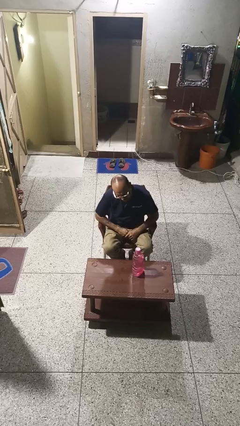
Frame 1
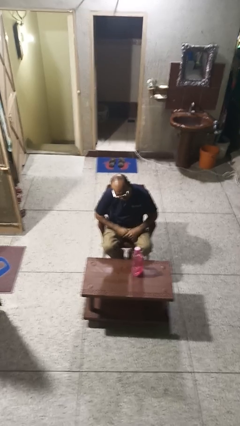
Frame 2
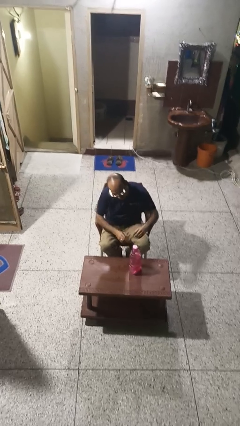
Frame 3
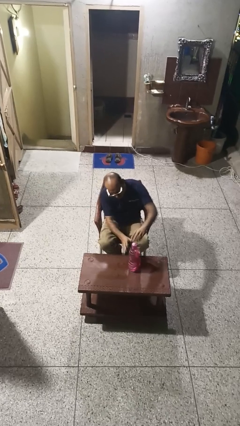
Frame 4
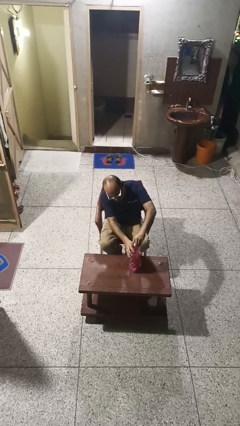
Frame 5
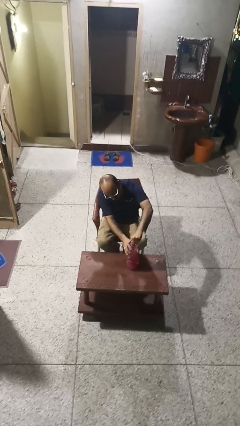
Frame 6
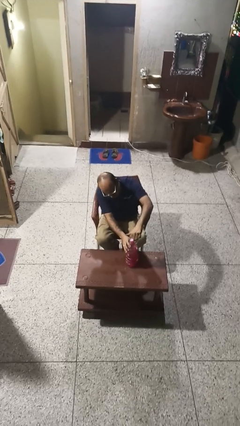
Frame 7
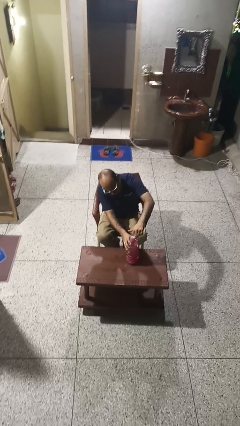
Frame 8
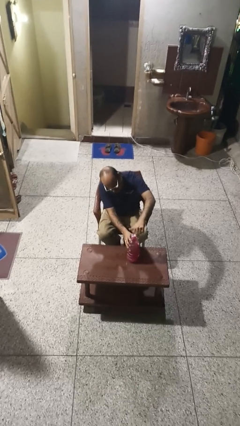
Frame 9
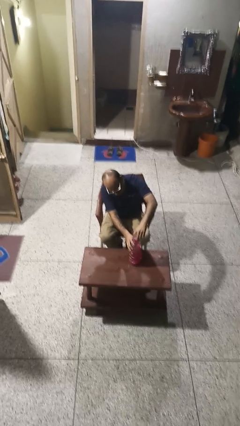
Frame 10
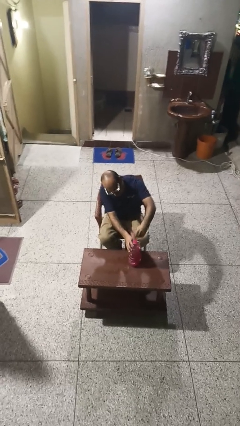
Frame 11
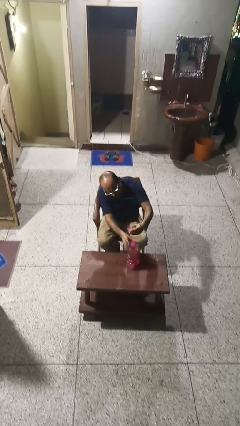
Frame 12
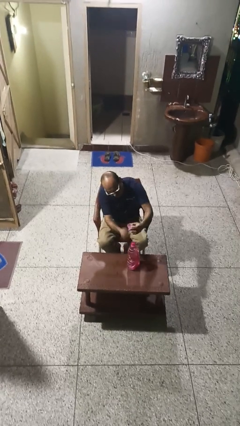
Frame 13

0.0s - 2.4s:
person unscrews lid from bottle

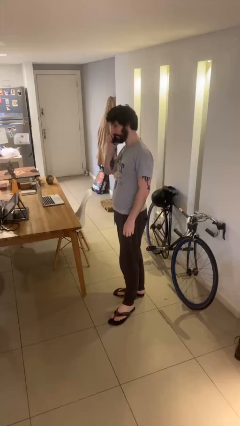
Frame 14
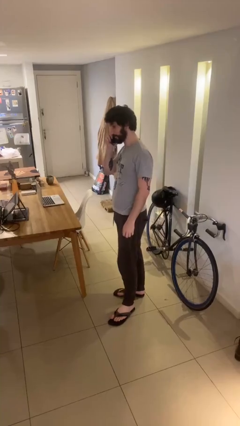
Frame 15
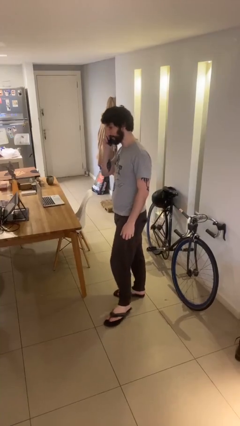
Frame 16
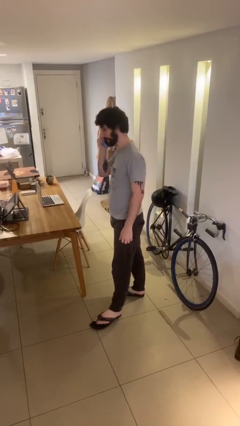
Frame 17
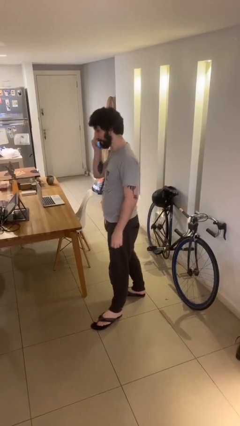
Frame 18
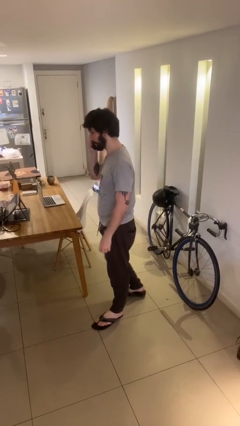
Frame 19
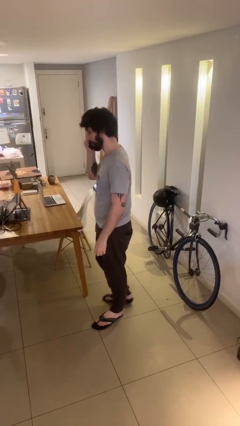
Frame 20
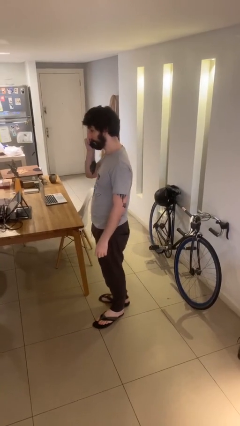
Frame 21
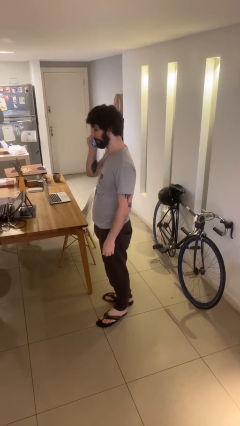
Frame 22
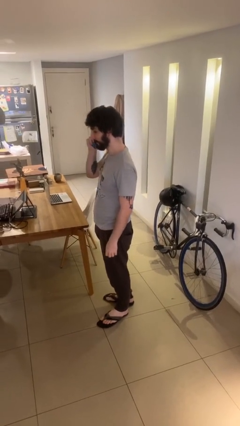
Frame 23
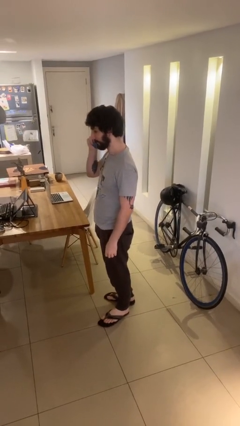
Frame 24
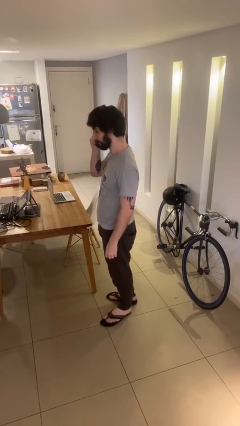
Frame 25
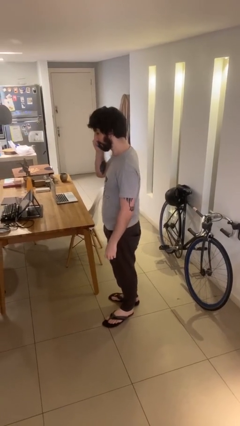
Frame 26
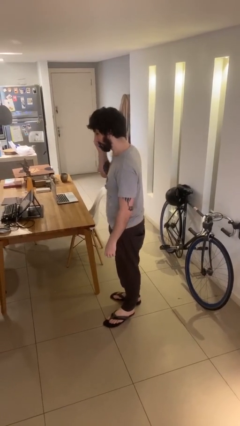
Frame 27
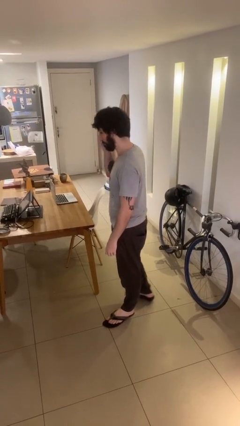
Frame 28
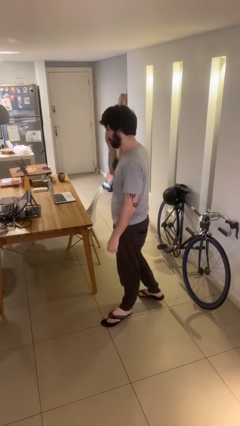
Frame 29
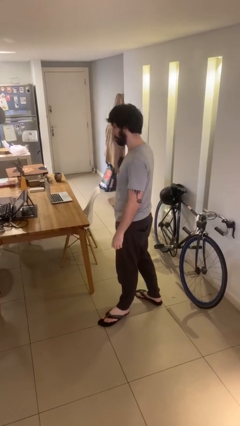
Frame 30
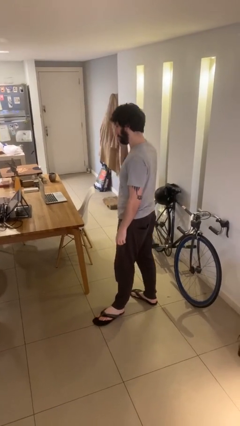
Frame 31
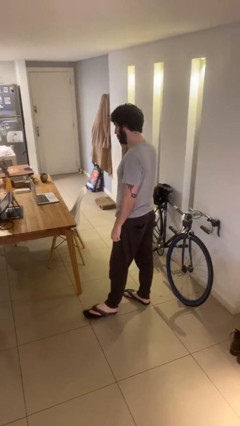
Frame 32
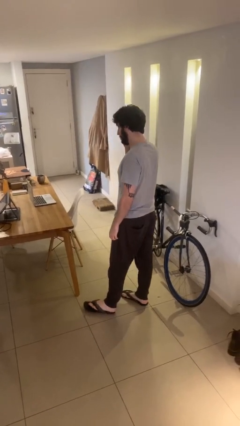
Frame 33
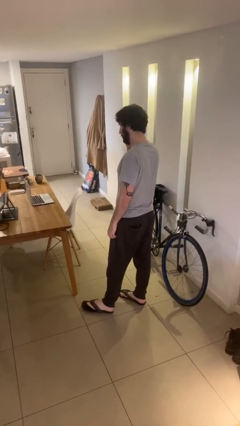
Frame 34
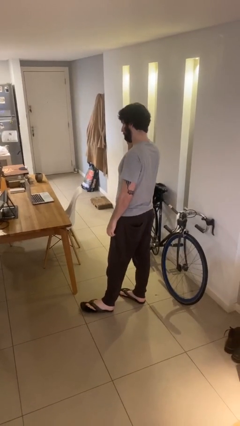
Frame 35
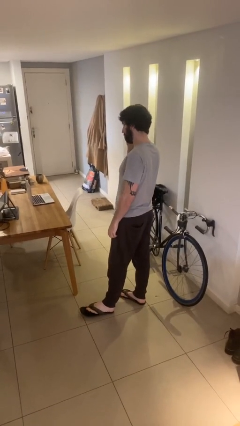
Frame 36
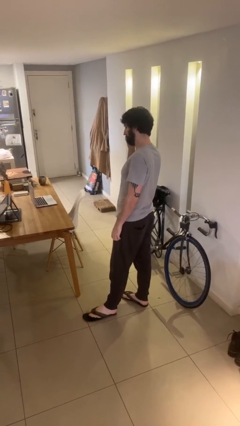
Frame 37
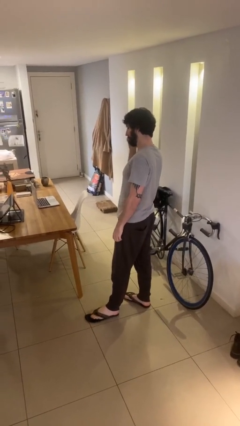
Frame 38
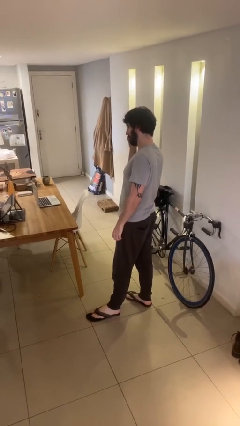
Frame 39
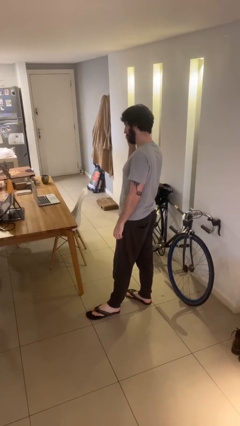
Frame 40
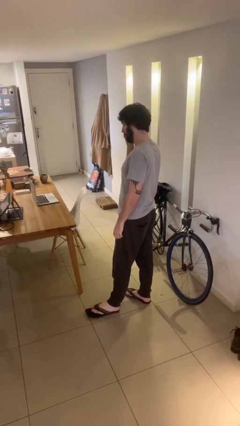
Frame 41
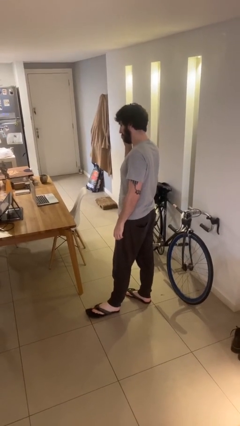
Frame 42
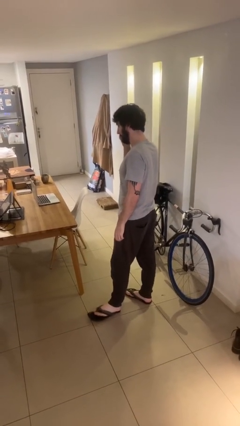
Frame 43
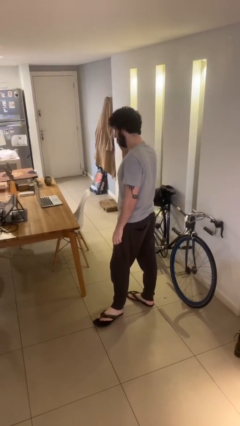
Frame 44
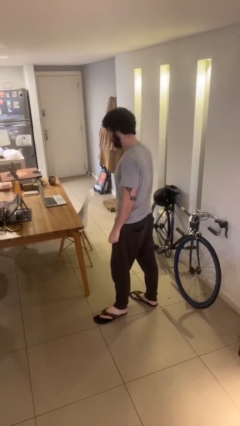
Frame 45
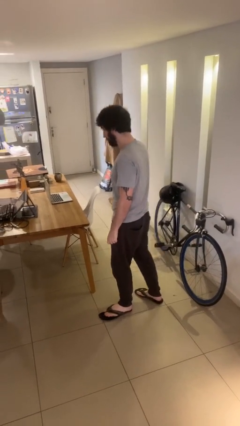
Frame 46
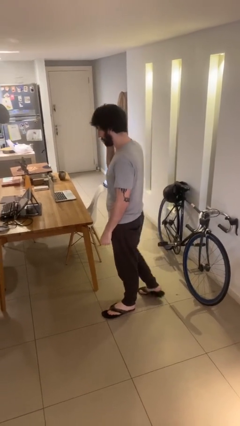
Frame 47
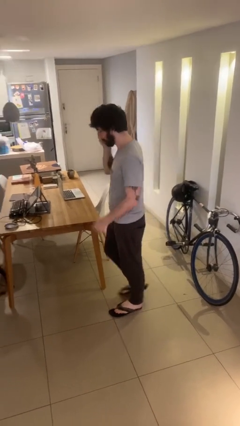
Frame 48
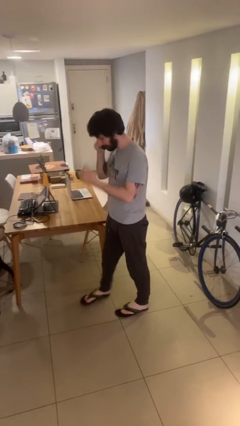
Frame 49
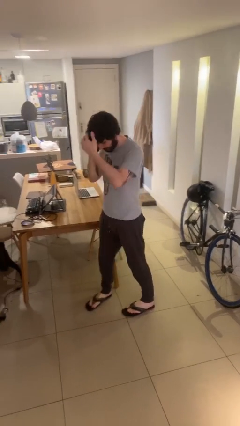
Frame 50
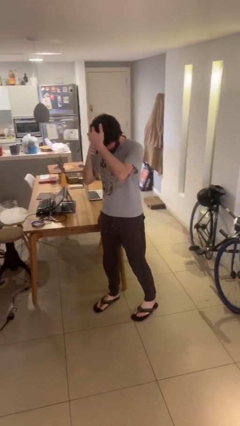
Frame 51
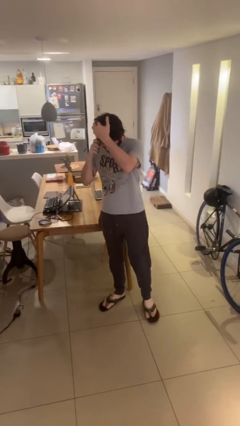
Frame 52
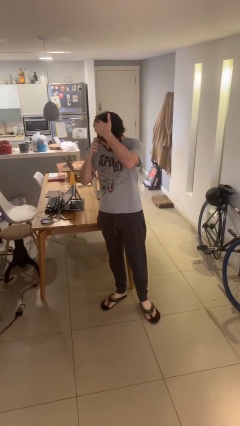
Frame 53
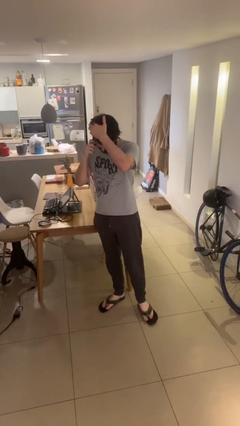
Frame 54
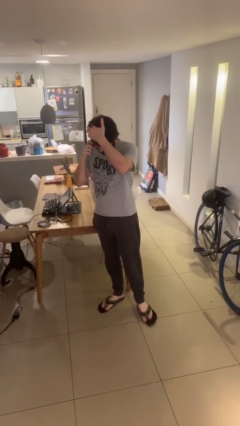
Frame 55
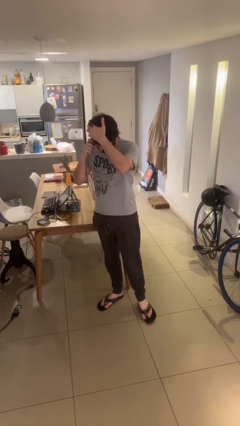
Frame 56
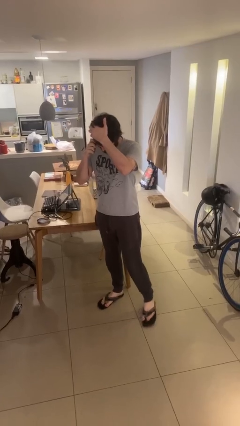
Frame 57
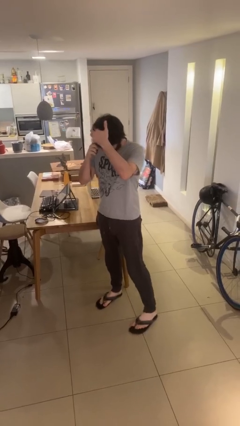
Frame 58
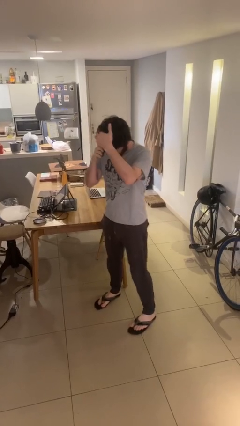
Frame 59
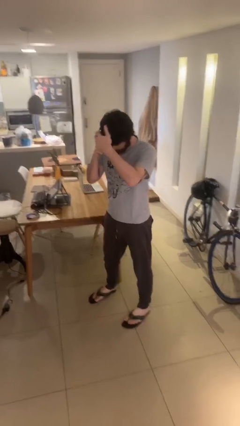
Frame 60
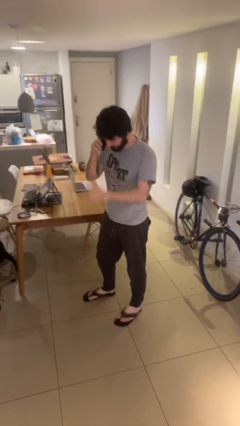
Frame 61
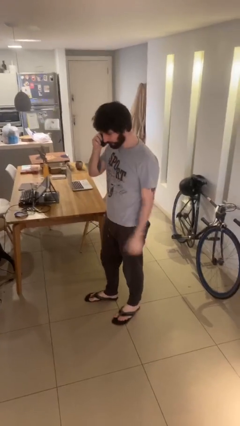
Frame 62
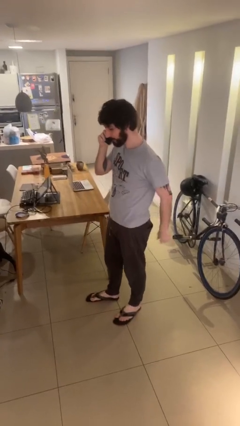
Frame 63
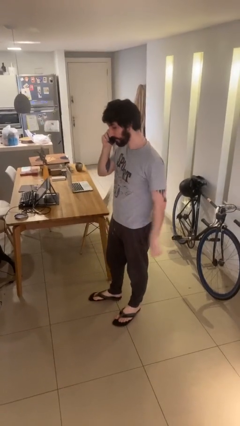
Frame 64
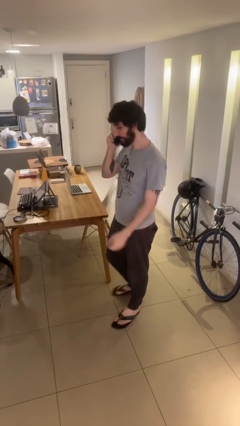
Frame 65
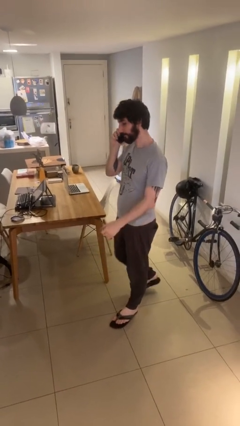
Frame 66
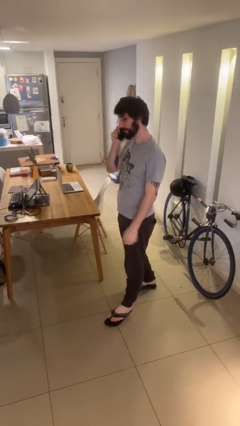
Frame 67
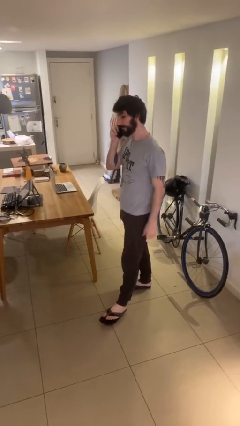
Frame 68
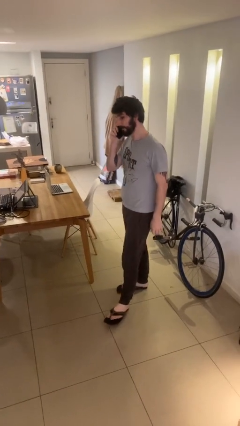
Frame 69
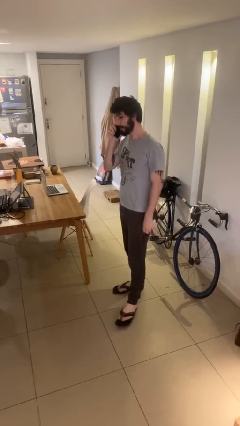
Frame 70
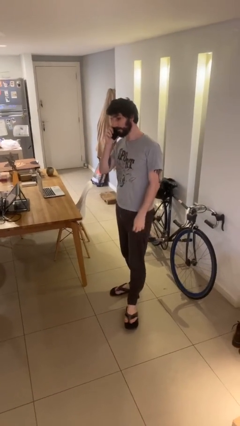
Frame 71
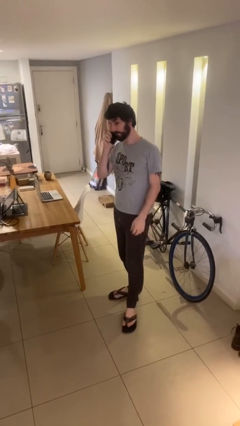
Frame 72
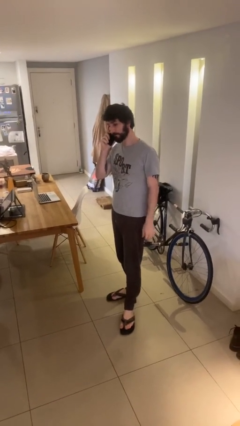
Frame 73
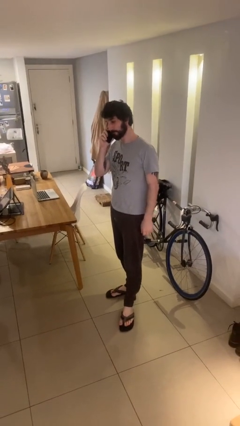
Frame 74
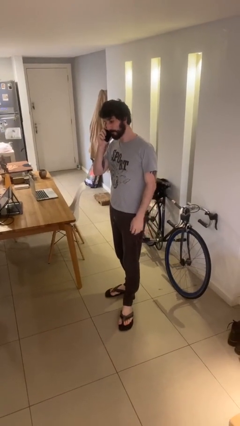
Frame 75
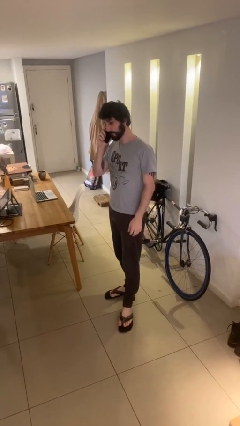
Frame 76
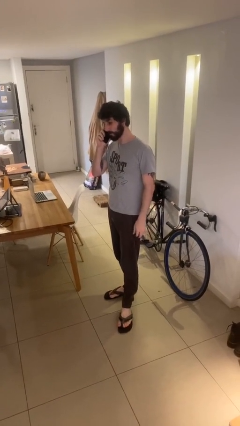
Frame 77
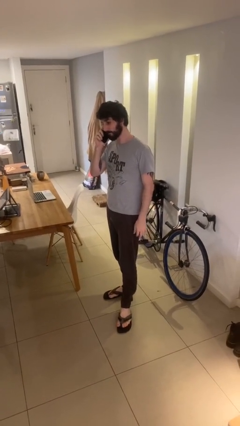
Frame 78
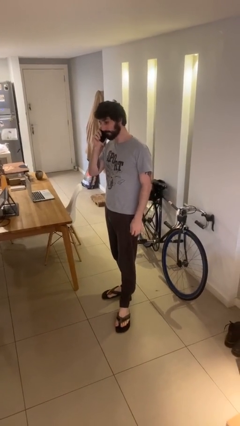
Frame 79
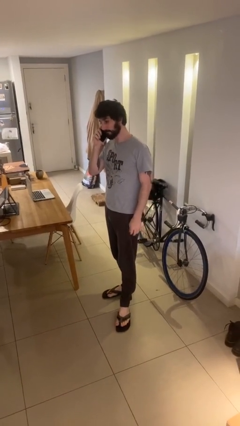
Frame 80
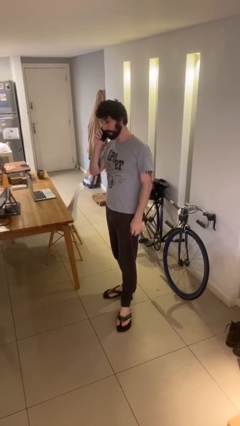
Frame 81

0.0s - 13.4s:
person talks on phone

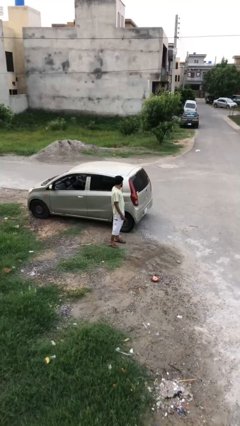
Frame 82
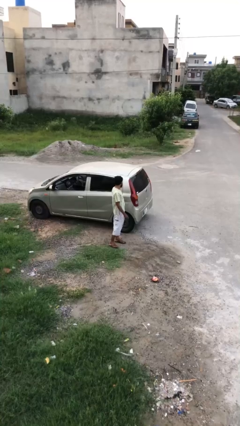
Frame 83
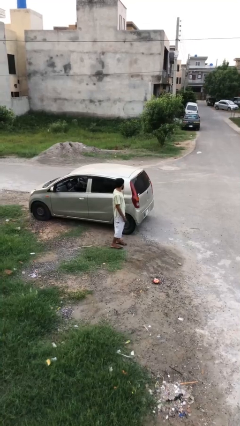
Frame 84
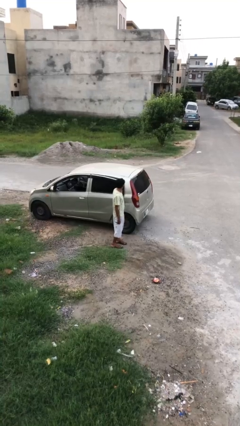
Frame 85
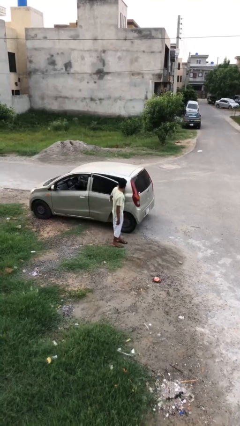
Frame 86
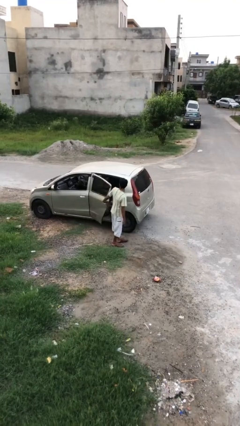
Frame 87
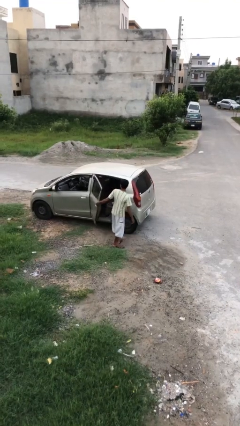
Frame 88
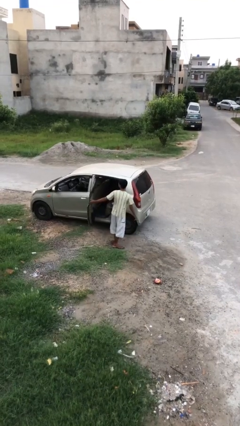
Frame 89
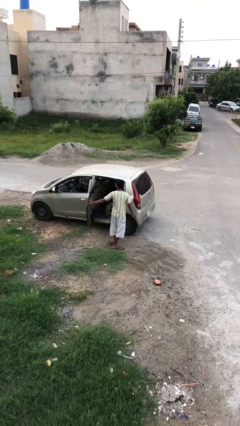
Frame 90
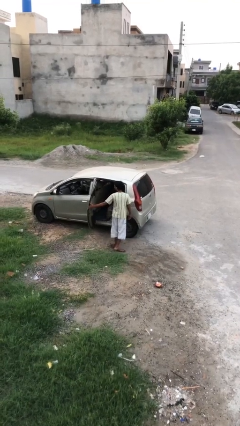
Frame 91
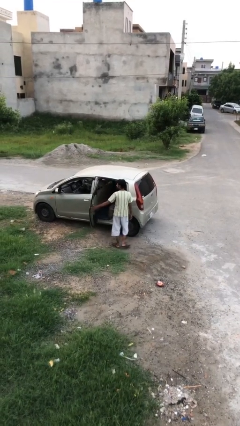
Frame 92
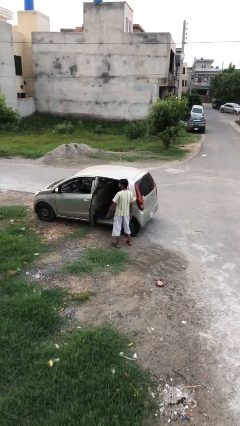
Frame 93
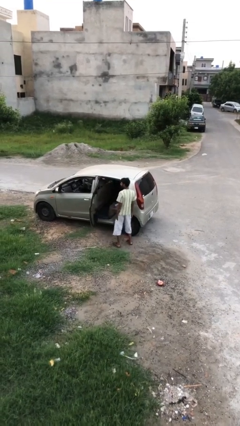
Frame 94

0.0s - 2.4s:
person opens car door
